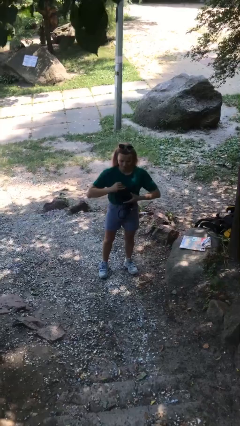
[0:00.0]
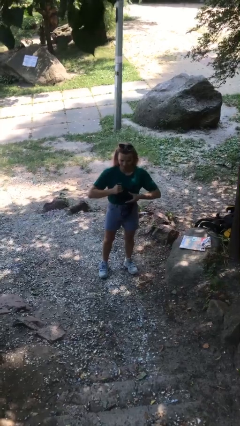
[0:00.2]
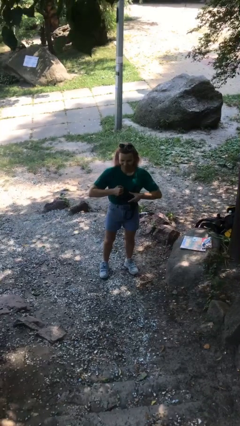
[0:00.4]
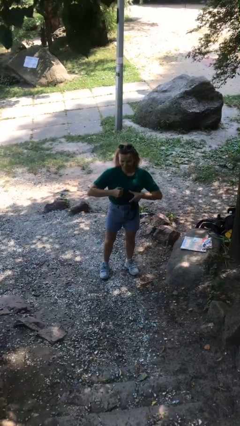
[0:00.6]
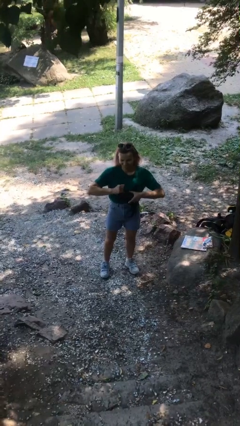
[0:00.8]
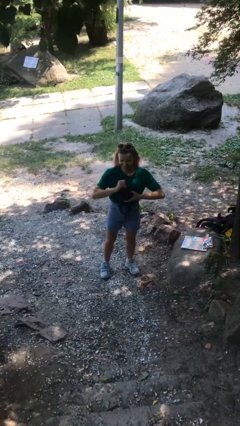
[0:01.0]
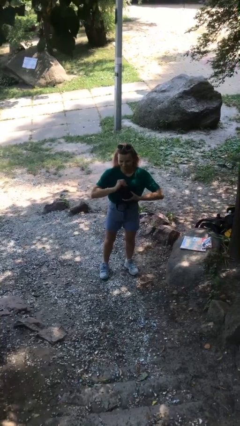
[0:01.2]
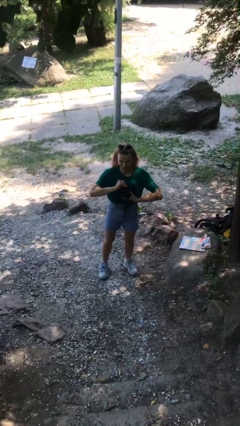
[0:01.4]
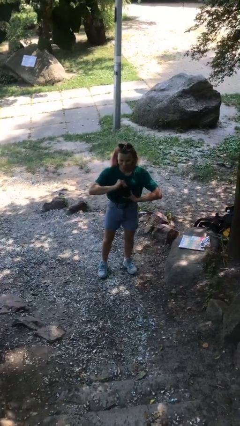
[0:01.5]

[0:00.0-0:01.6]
person squeezes object

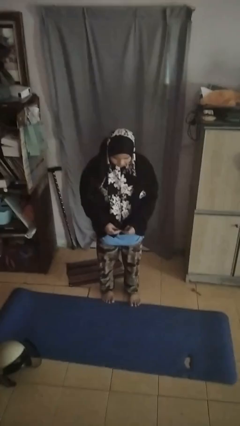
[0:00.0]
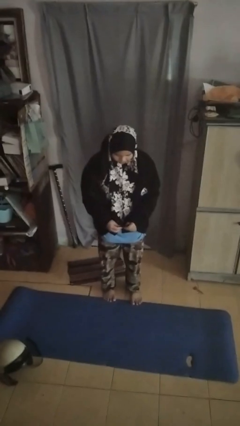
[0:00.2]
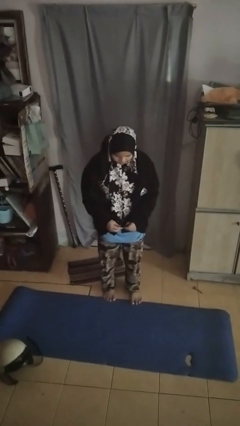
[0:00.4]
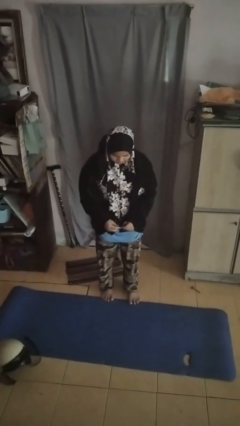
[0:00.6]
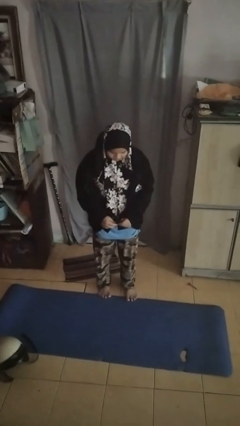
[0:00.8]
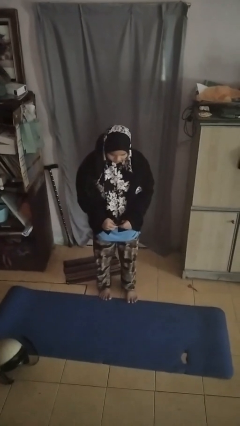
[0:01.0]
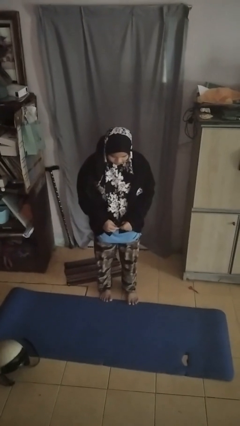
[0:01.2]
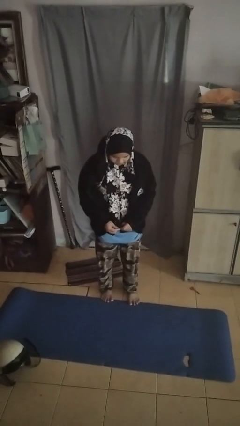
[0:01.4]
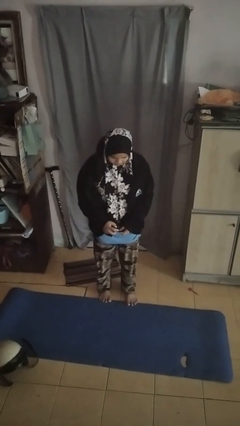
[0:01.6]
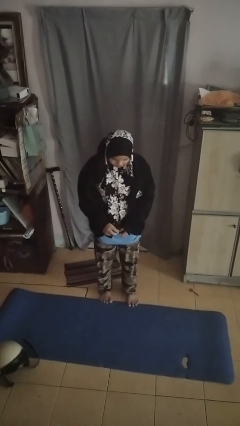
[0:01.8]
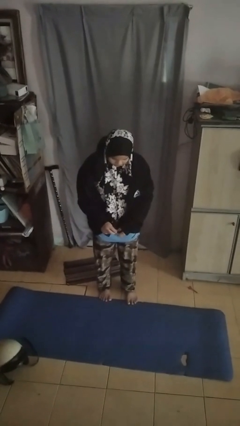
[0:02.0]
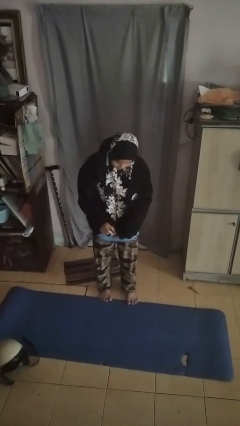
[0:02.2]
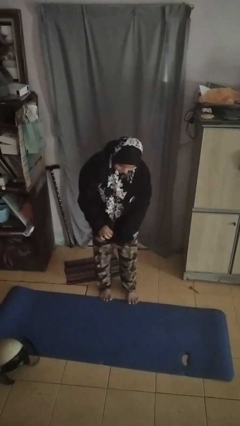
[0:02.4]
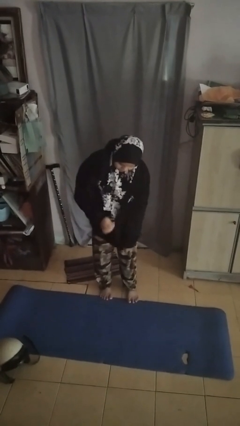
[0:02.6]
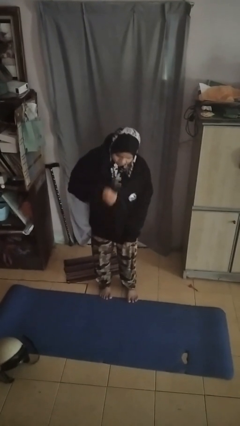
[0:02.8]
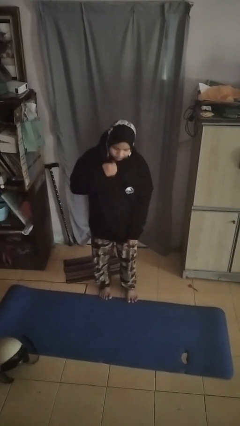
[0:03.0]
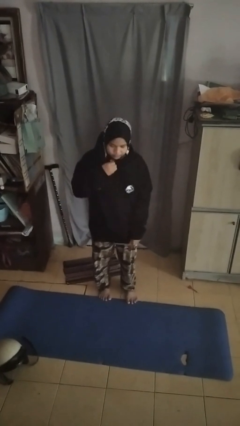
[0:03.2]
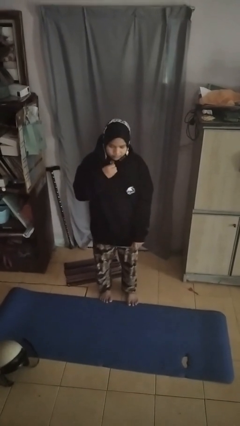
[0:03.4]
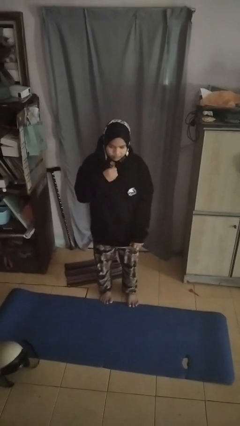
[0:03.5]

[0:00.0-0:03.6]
person zips up jacket

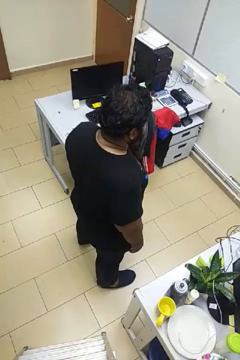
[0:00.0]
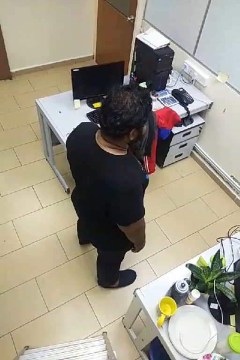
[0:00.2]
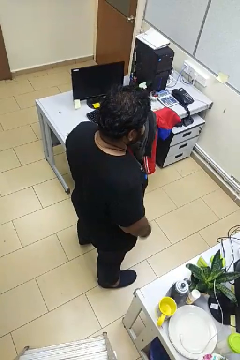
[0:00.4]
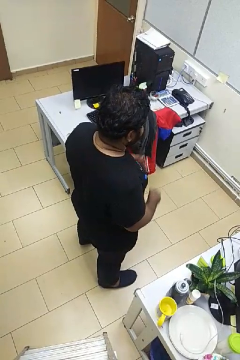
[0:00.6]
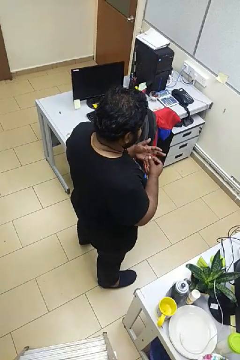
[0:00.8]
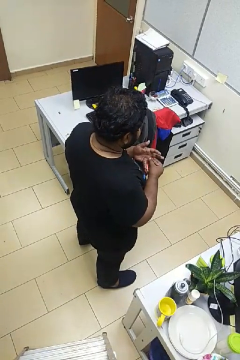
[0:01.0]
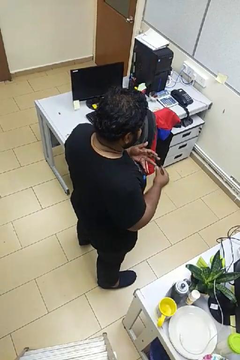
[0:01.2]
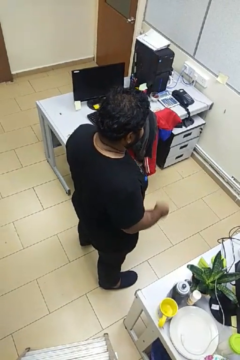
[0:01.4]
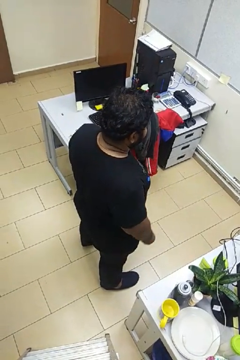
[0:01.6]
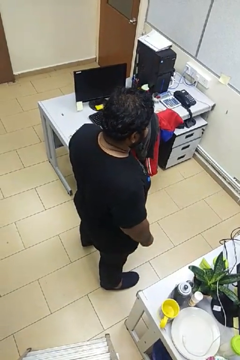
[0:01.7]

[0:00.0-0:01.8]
person takes off ring

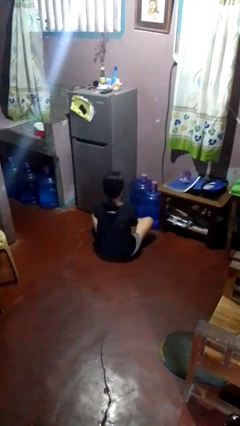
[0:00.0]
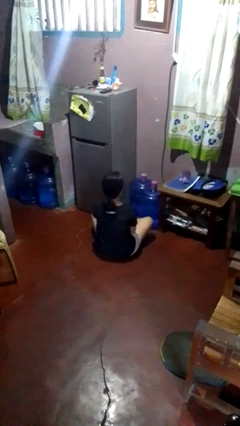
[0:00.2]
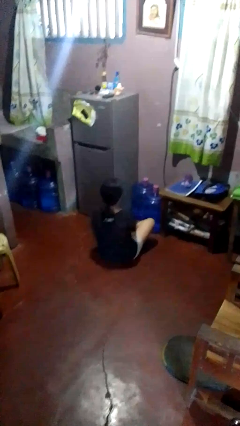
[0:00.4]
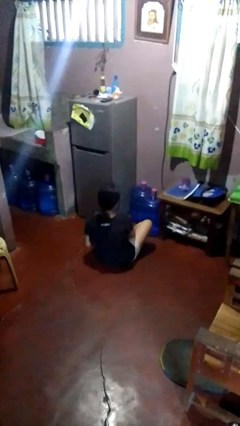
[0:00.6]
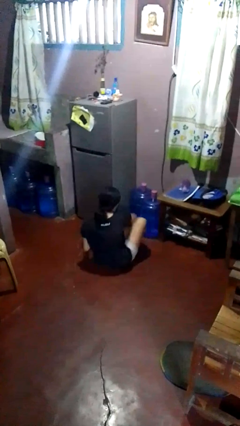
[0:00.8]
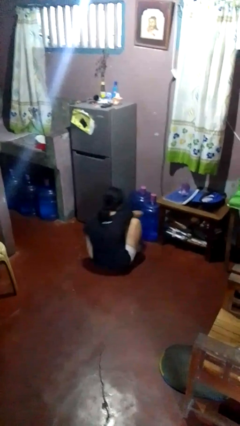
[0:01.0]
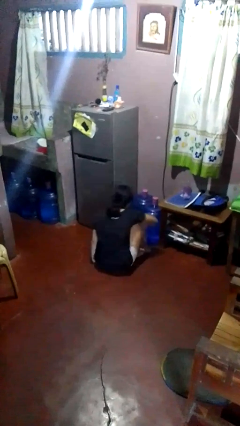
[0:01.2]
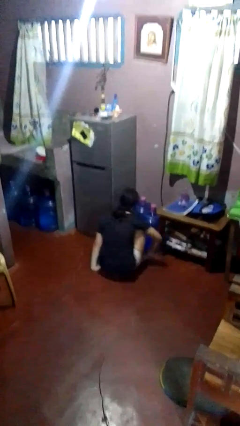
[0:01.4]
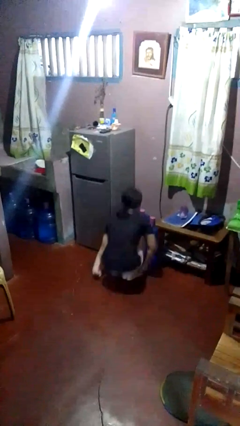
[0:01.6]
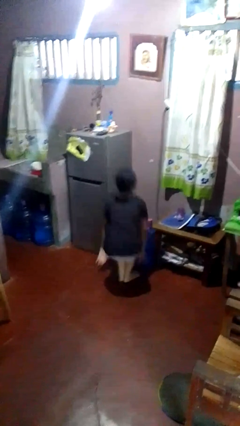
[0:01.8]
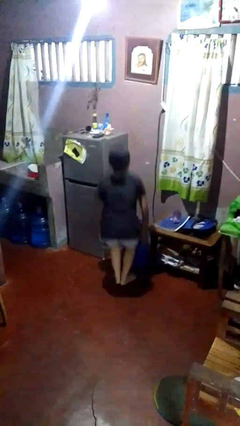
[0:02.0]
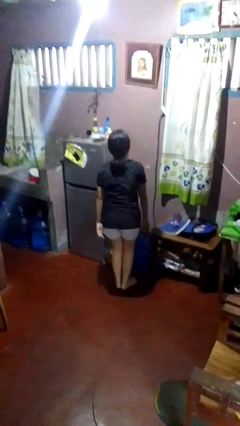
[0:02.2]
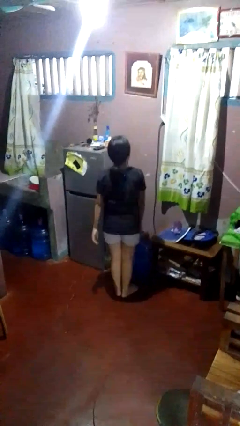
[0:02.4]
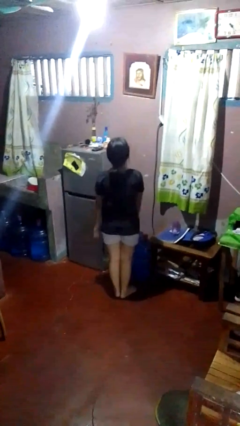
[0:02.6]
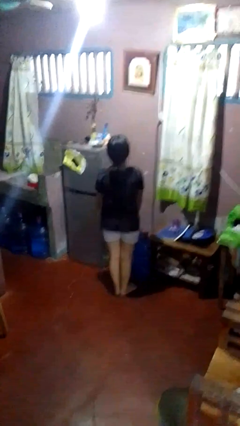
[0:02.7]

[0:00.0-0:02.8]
person stands up from floor

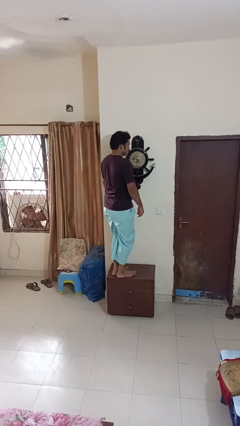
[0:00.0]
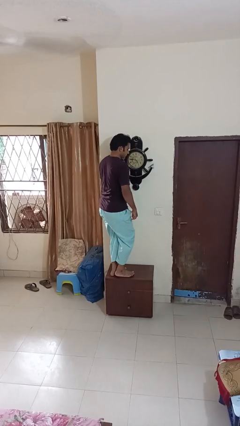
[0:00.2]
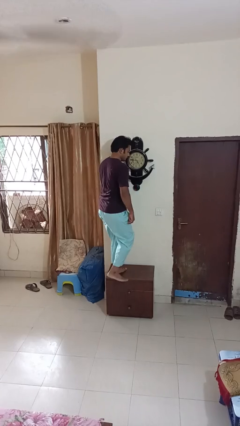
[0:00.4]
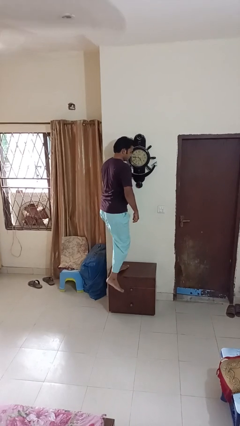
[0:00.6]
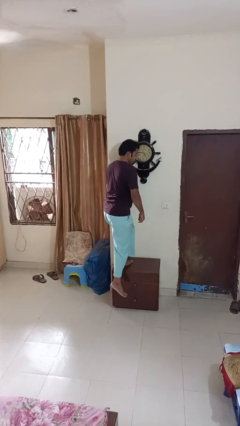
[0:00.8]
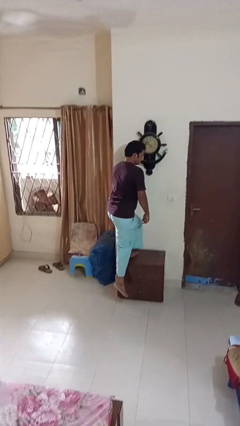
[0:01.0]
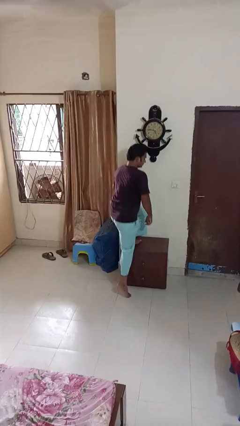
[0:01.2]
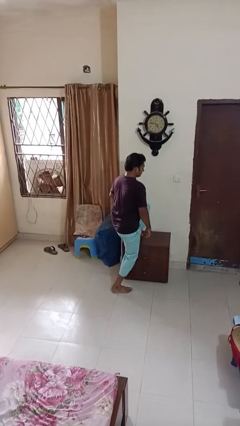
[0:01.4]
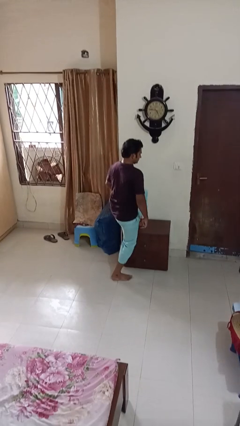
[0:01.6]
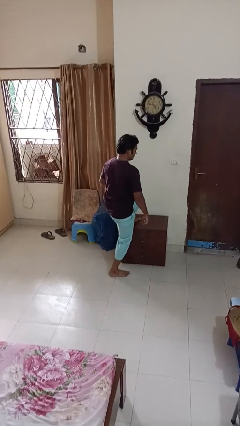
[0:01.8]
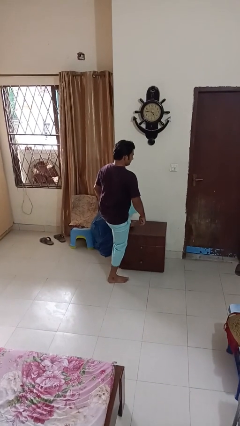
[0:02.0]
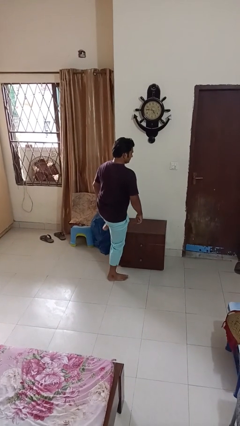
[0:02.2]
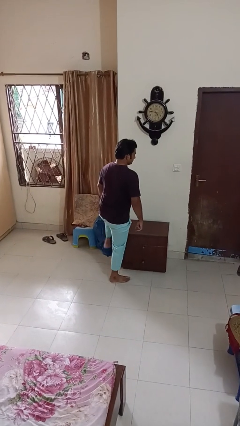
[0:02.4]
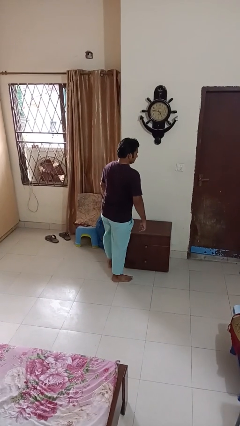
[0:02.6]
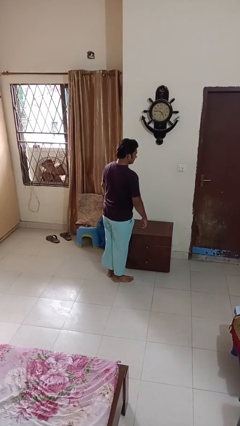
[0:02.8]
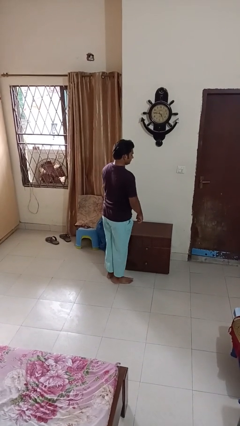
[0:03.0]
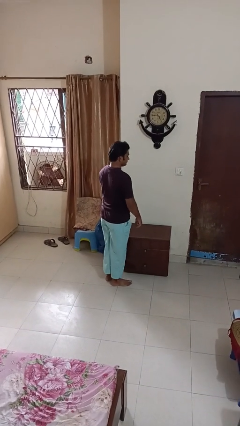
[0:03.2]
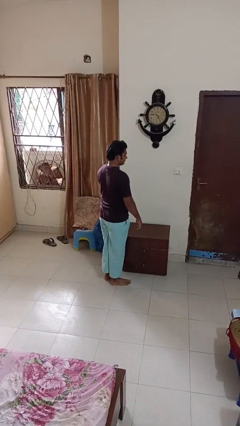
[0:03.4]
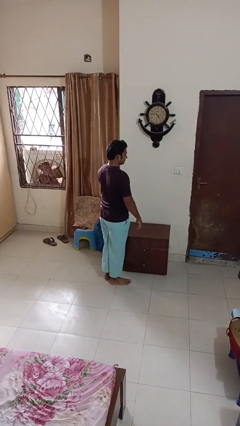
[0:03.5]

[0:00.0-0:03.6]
person climbs off table

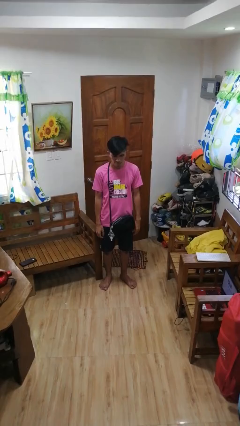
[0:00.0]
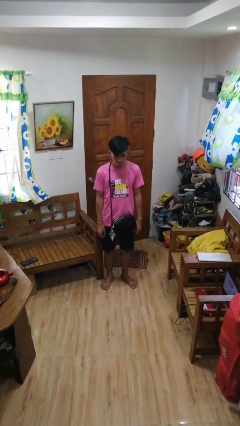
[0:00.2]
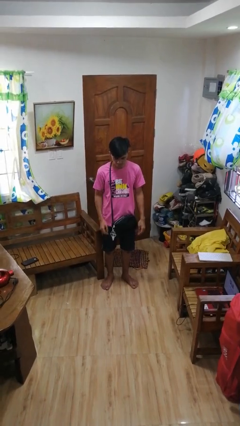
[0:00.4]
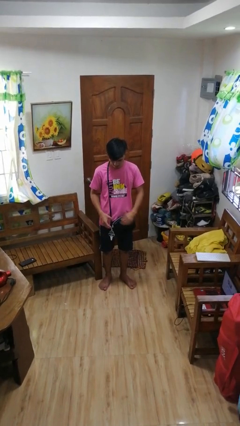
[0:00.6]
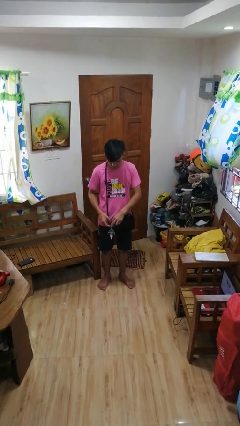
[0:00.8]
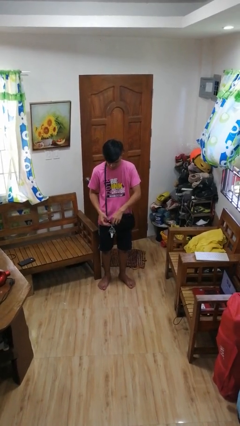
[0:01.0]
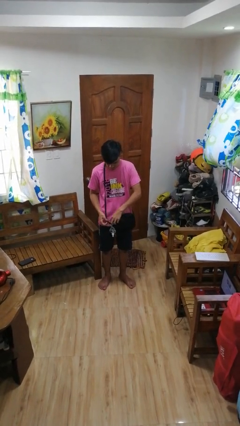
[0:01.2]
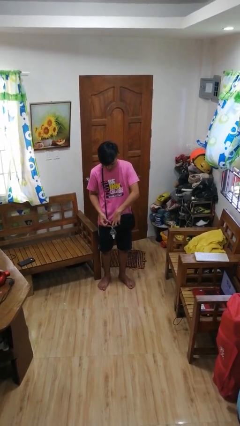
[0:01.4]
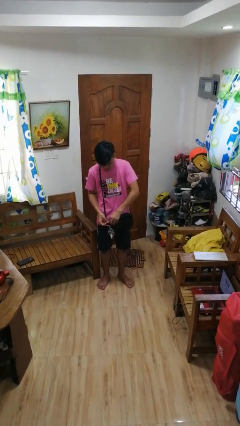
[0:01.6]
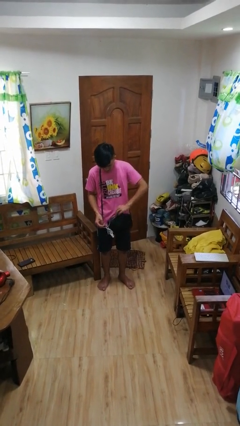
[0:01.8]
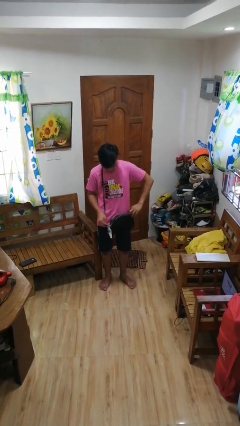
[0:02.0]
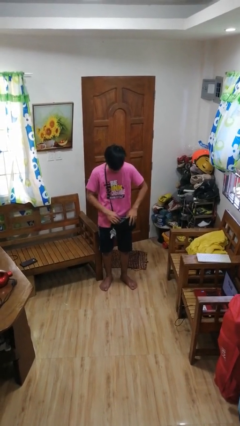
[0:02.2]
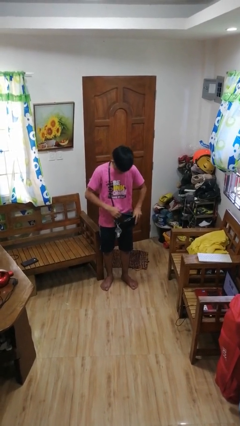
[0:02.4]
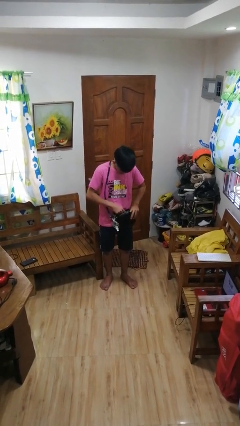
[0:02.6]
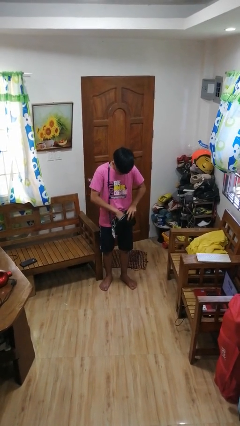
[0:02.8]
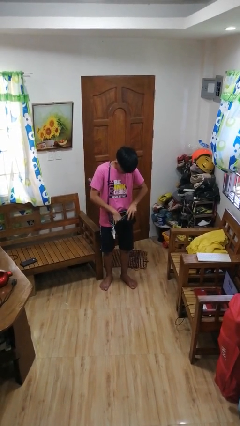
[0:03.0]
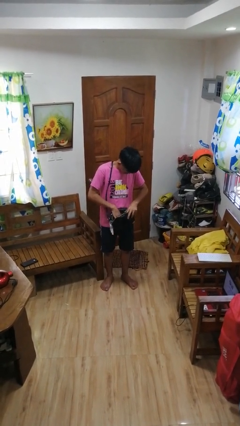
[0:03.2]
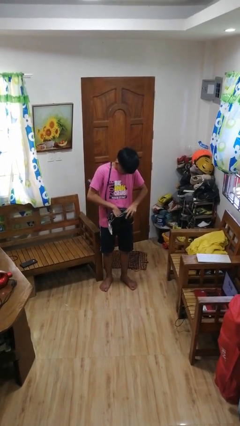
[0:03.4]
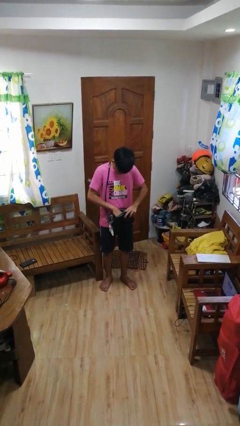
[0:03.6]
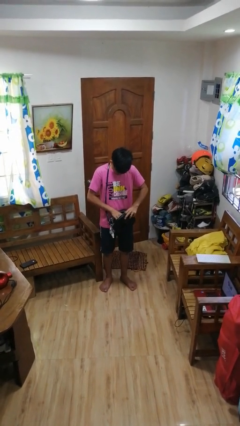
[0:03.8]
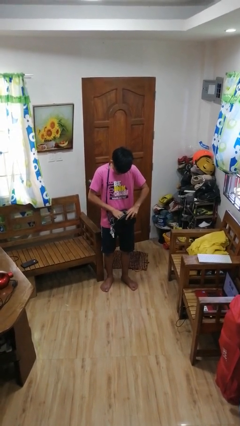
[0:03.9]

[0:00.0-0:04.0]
person searches in purse
